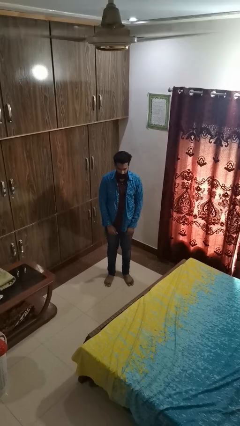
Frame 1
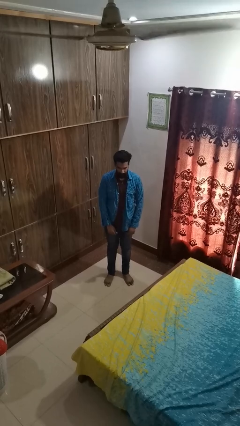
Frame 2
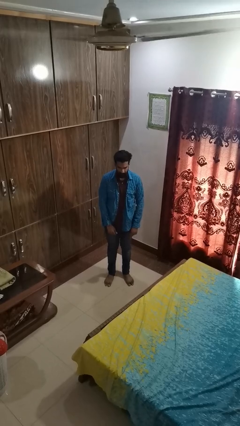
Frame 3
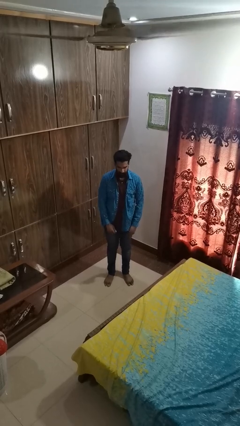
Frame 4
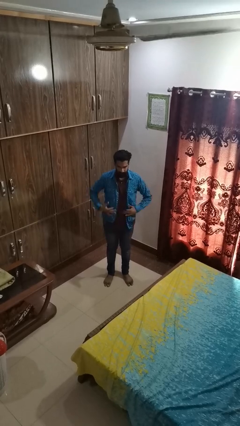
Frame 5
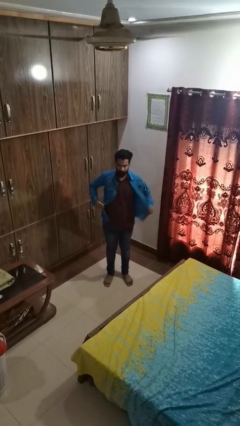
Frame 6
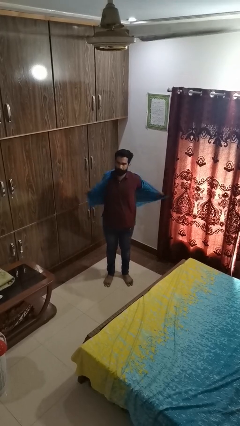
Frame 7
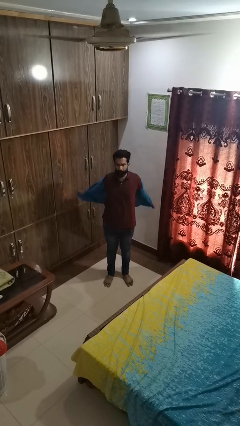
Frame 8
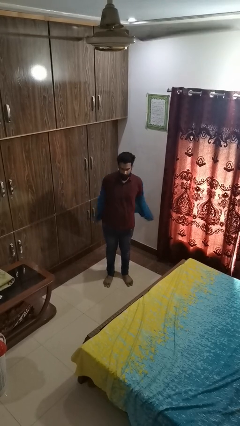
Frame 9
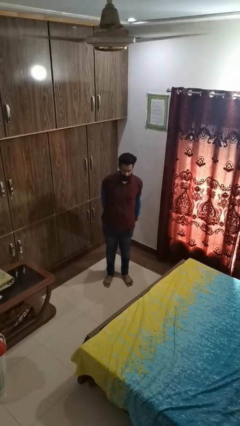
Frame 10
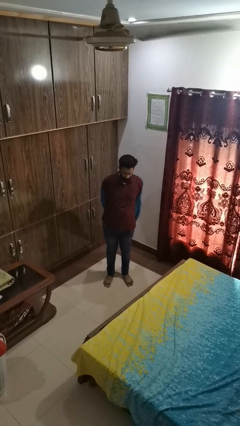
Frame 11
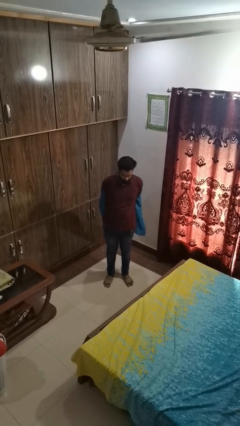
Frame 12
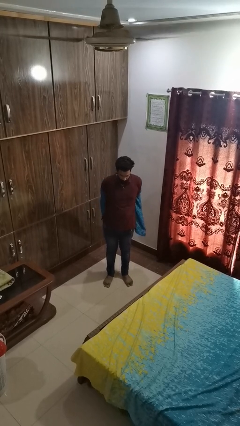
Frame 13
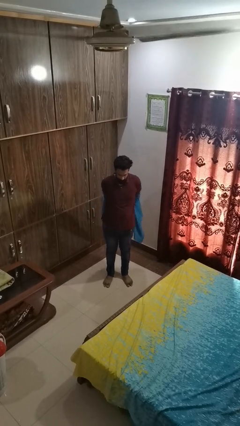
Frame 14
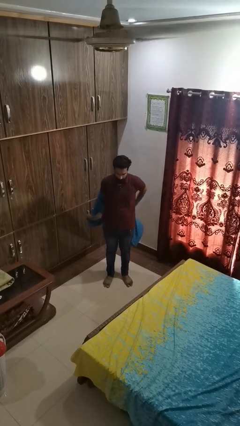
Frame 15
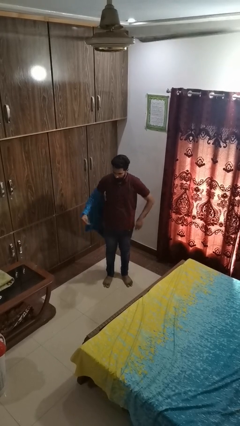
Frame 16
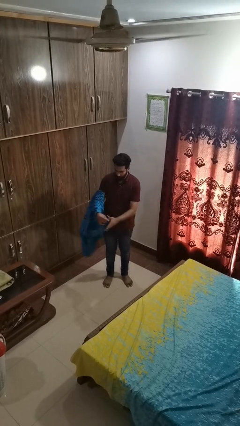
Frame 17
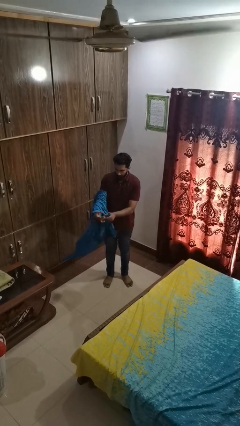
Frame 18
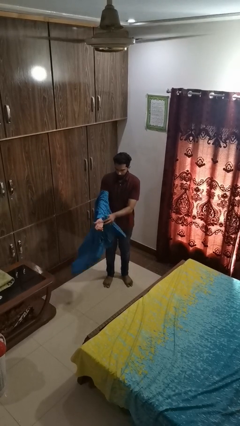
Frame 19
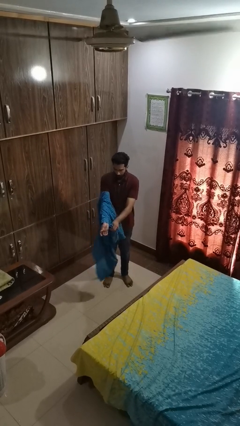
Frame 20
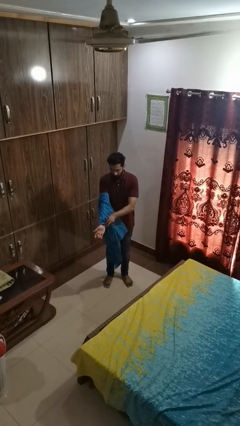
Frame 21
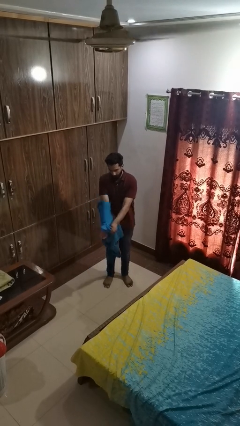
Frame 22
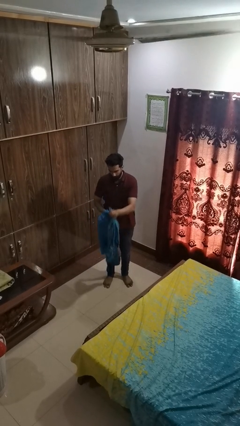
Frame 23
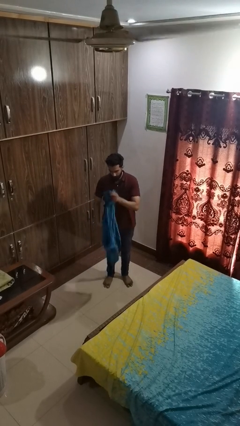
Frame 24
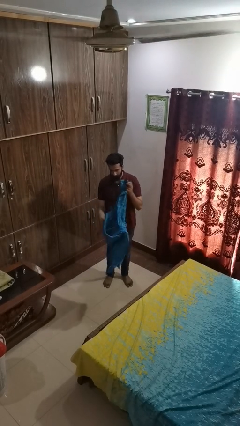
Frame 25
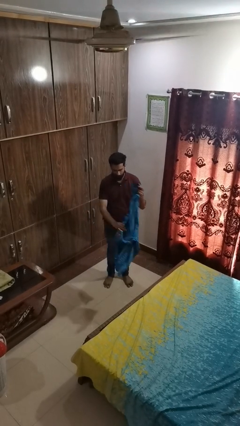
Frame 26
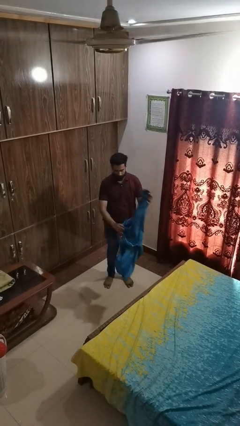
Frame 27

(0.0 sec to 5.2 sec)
person takes off shirt

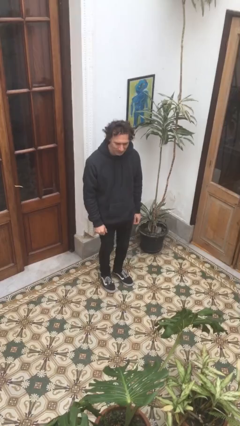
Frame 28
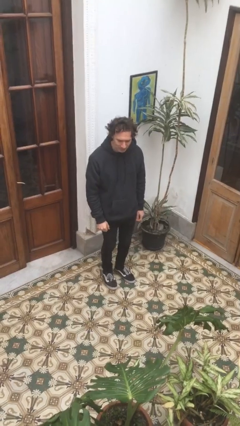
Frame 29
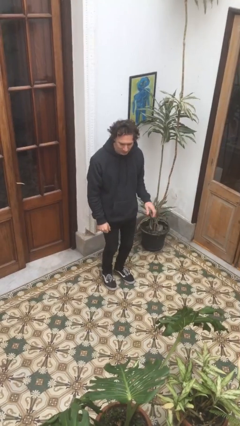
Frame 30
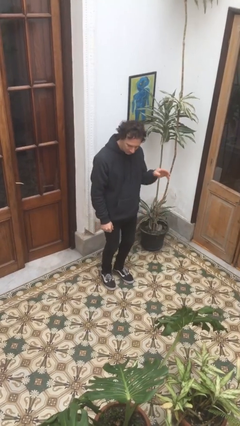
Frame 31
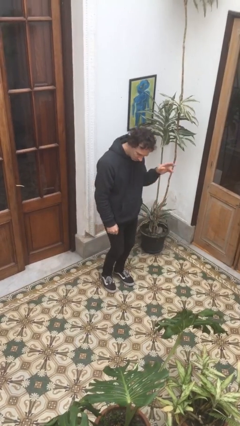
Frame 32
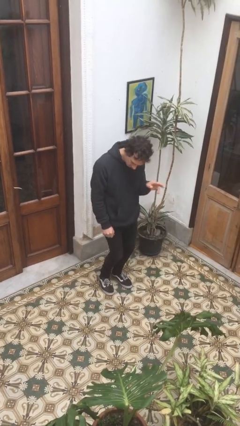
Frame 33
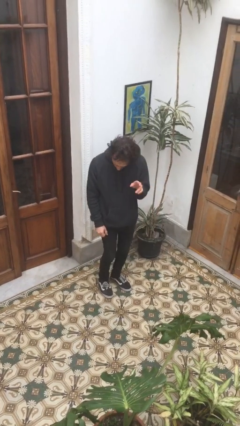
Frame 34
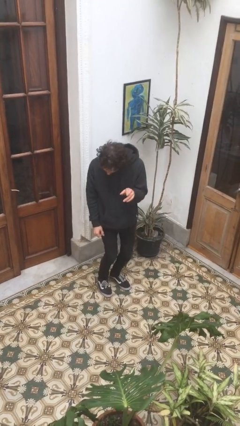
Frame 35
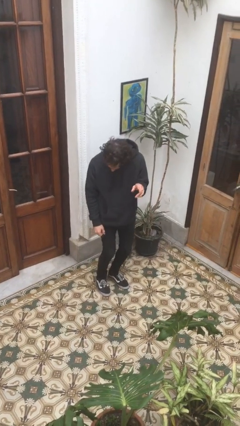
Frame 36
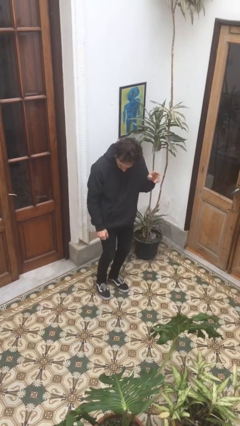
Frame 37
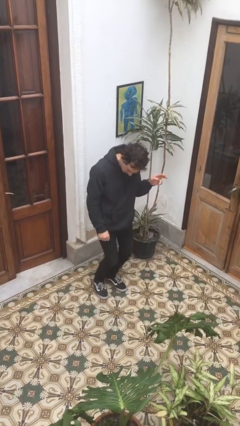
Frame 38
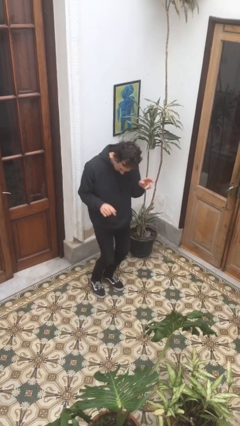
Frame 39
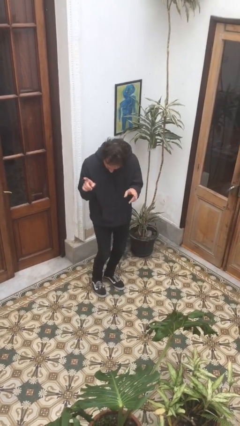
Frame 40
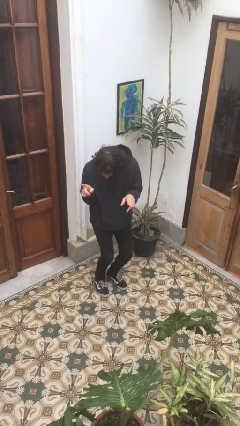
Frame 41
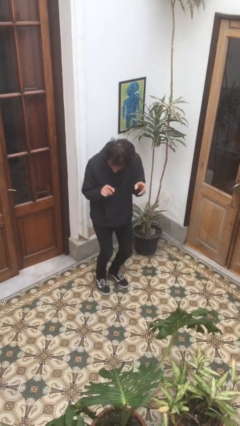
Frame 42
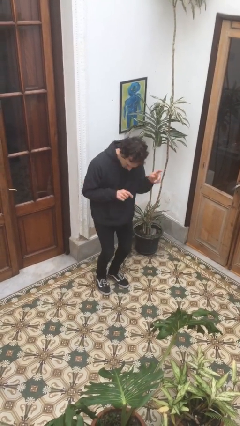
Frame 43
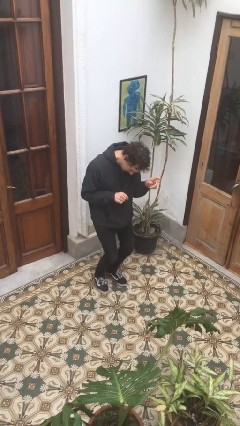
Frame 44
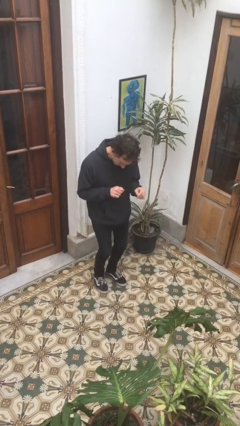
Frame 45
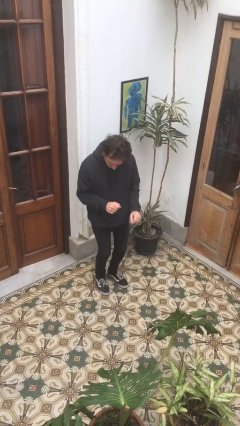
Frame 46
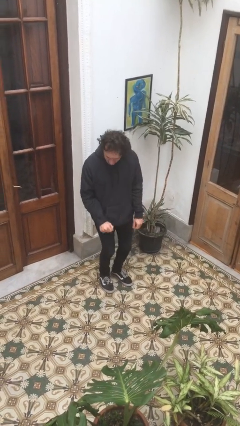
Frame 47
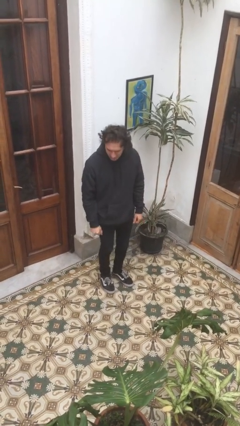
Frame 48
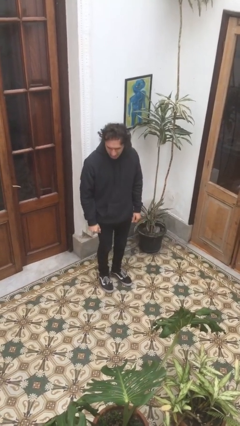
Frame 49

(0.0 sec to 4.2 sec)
person dances in place

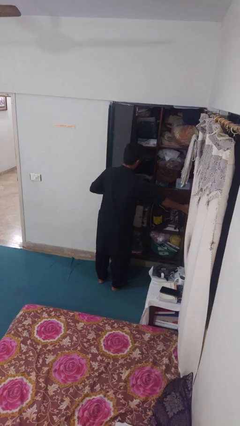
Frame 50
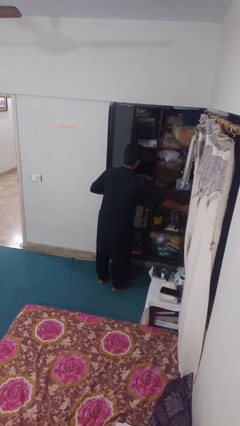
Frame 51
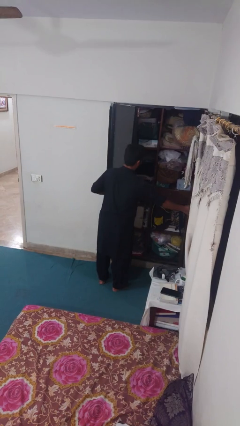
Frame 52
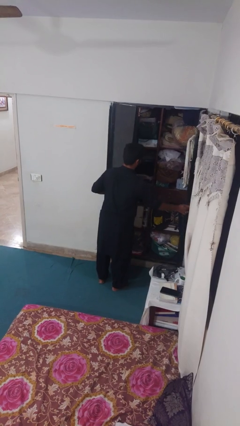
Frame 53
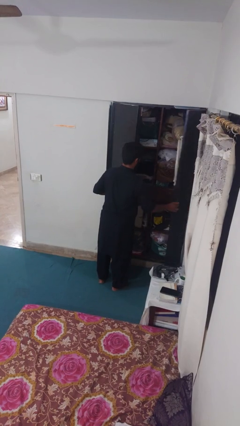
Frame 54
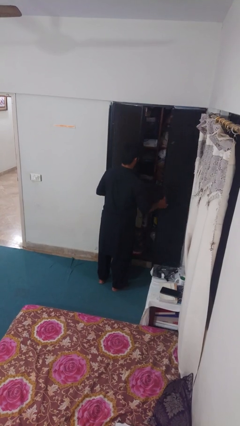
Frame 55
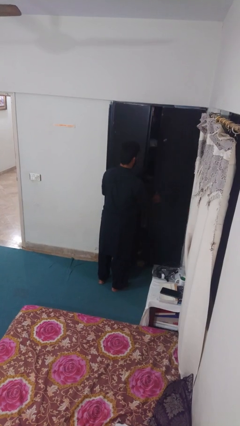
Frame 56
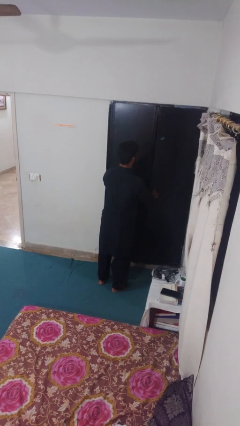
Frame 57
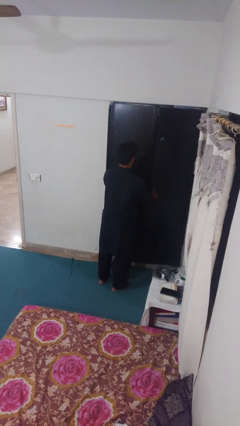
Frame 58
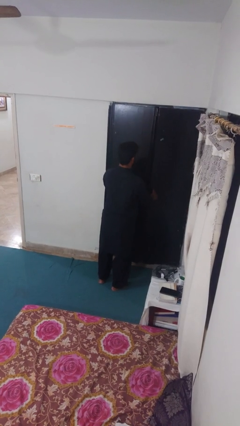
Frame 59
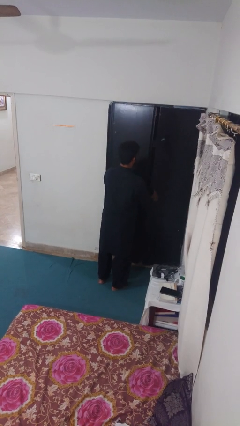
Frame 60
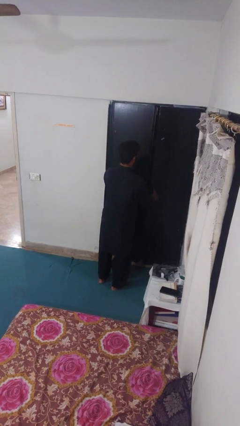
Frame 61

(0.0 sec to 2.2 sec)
person closes closet door

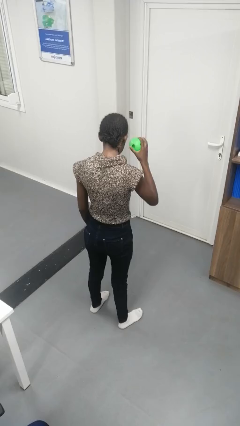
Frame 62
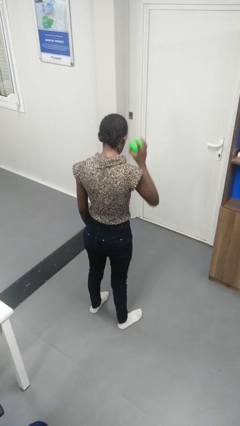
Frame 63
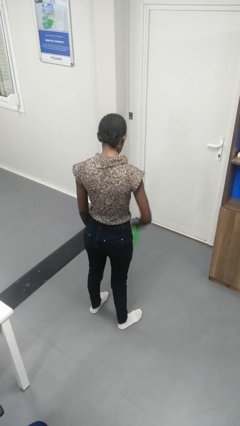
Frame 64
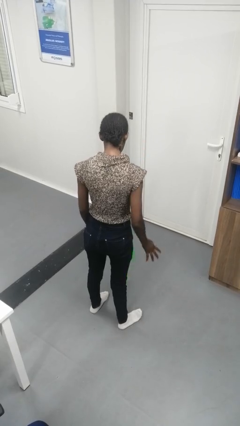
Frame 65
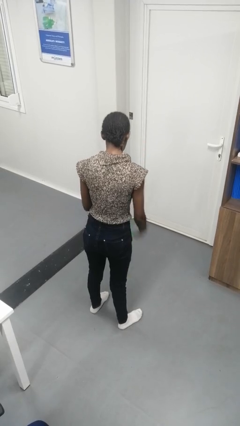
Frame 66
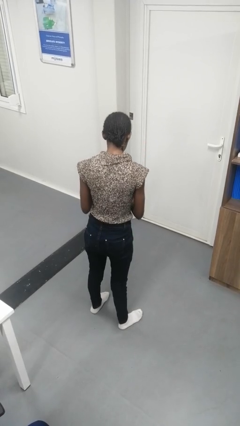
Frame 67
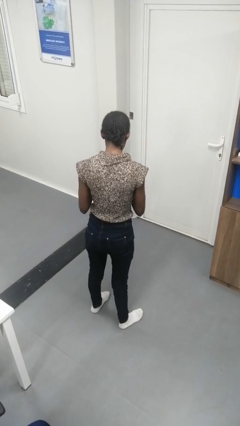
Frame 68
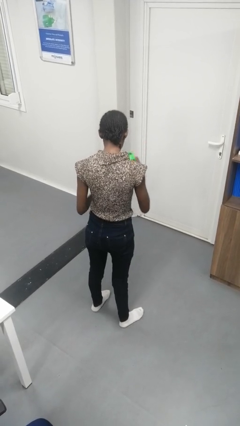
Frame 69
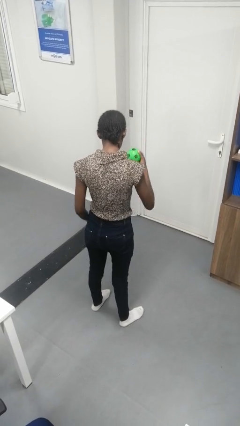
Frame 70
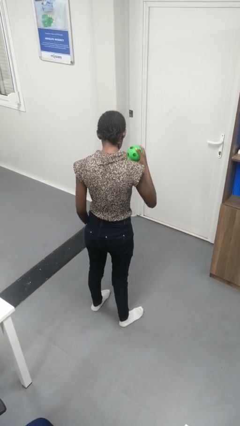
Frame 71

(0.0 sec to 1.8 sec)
person bounces ball on floor

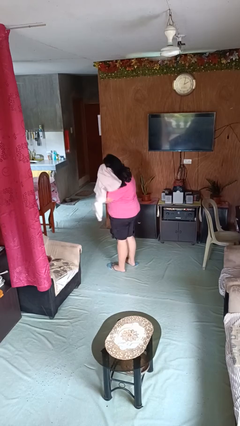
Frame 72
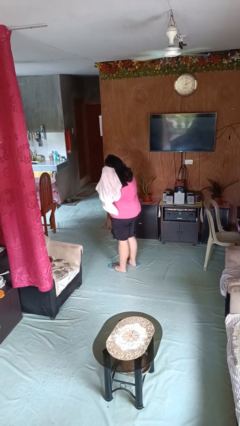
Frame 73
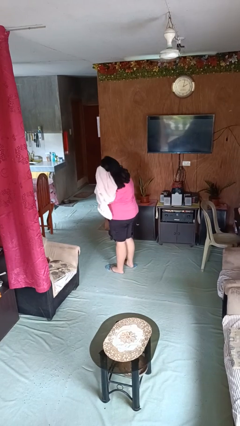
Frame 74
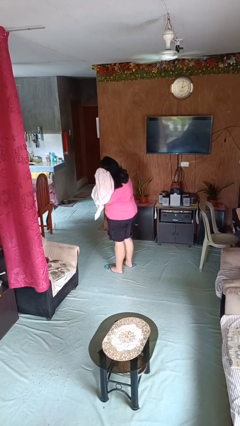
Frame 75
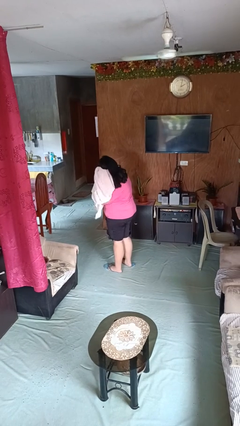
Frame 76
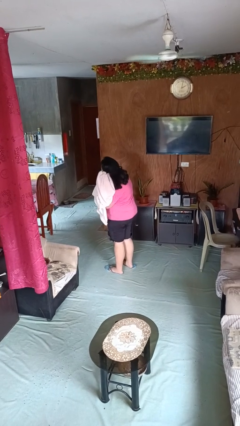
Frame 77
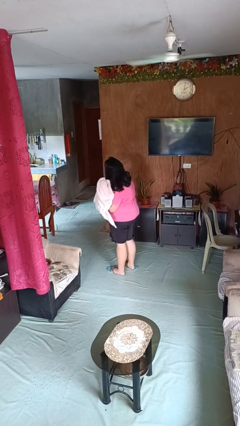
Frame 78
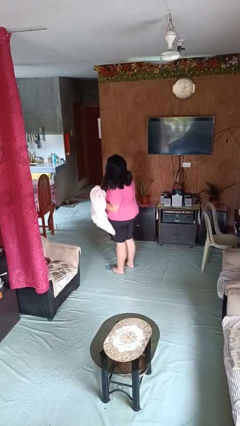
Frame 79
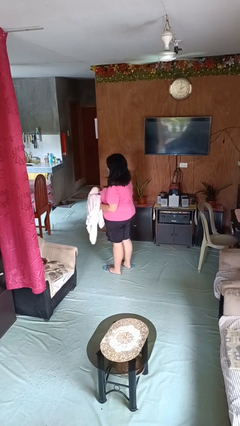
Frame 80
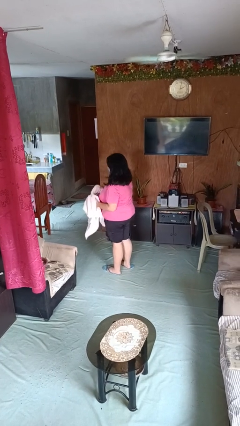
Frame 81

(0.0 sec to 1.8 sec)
person dries hair with towel

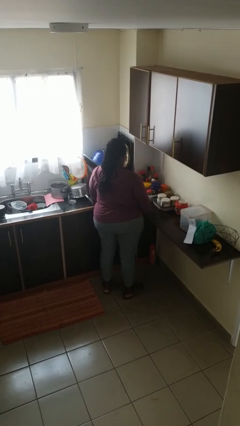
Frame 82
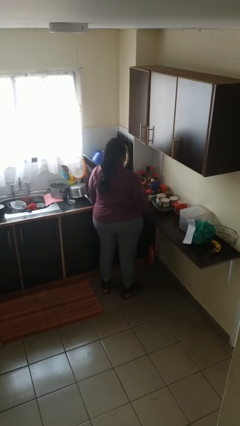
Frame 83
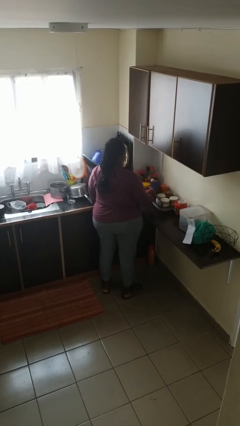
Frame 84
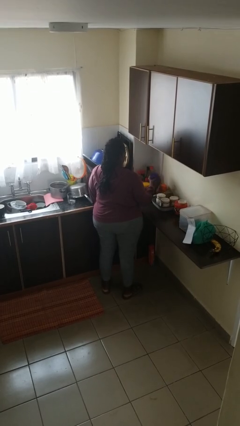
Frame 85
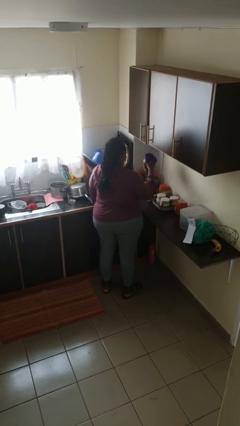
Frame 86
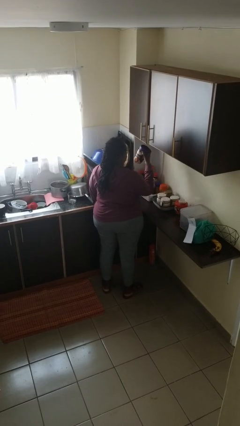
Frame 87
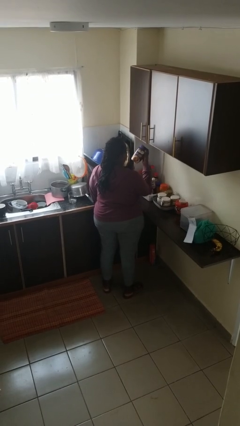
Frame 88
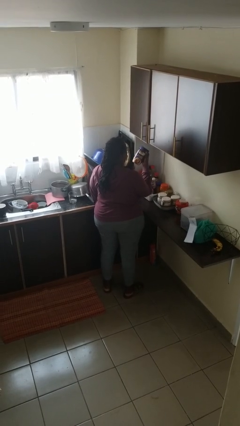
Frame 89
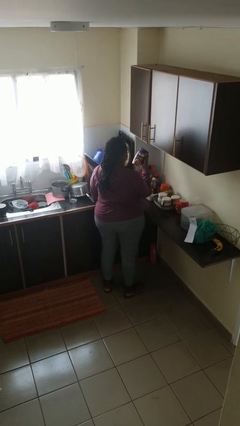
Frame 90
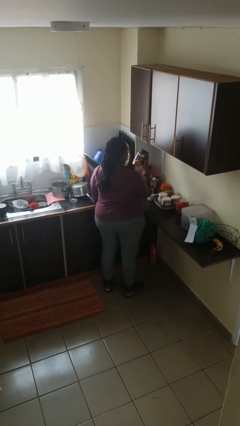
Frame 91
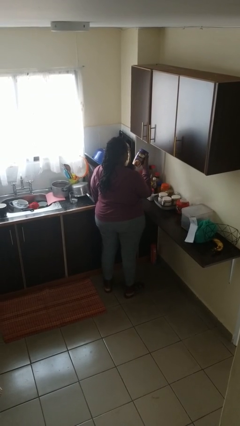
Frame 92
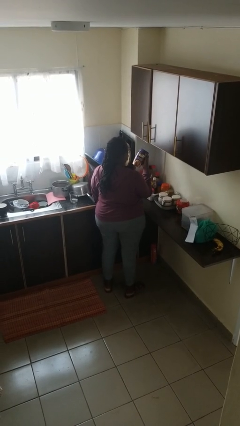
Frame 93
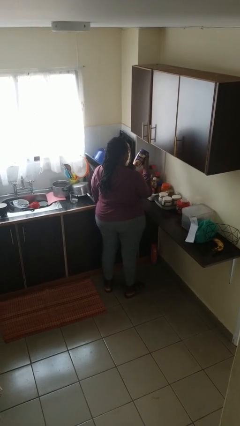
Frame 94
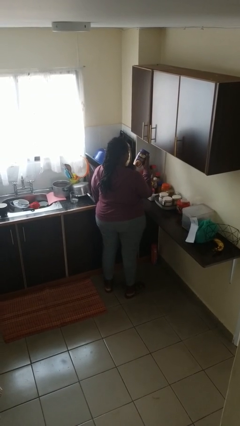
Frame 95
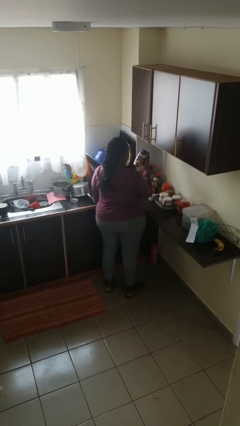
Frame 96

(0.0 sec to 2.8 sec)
person picks up object from countertop
